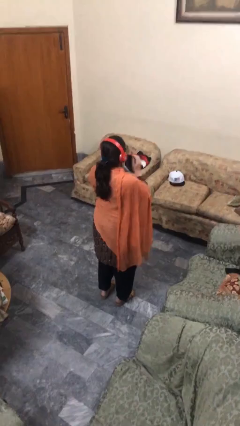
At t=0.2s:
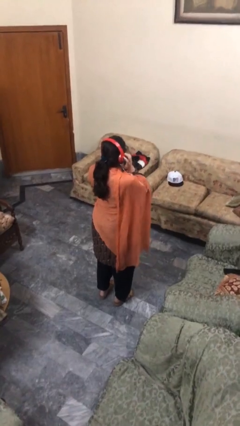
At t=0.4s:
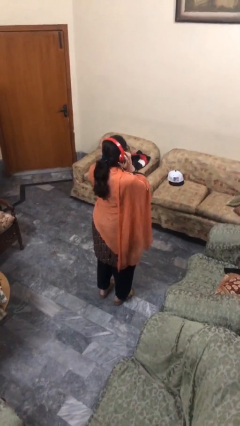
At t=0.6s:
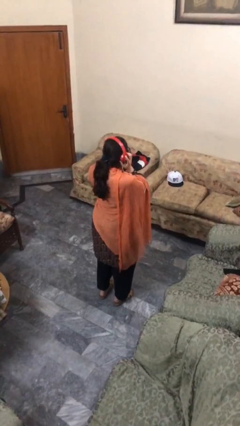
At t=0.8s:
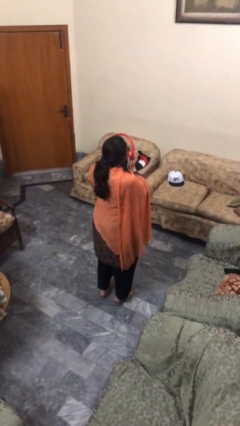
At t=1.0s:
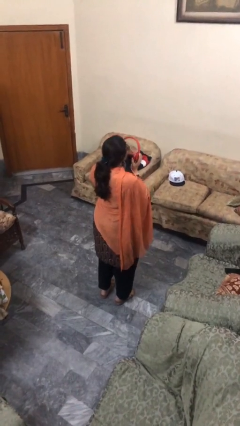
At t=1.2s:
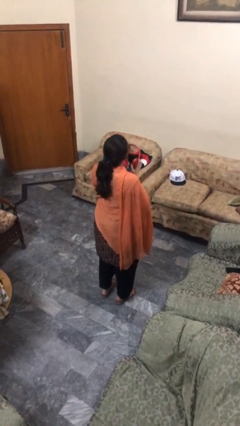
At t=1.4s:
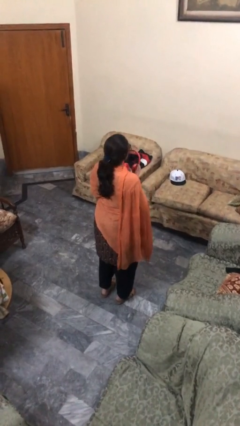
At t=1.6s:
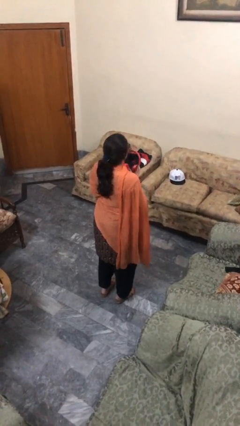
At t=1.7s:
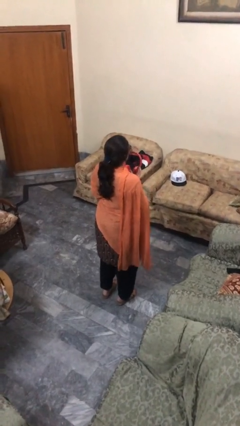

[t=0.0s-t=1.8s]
person takes off headphones

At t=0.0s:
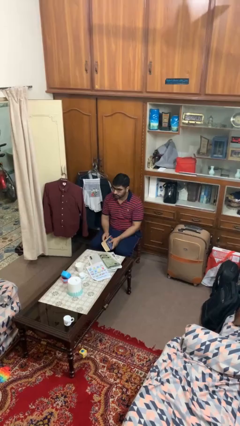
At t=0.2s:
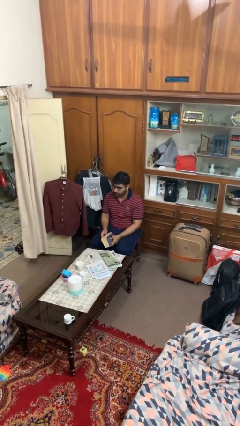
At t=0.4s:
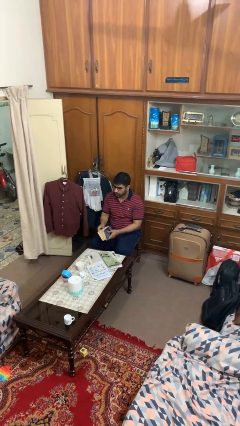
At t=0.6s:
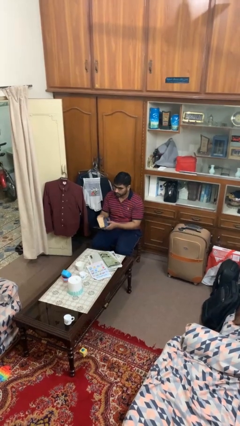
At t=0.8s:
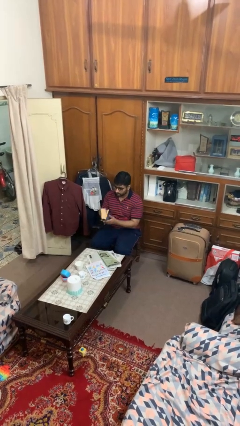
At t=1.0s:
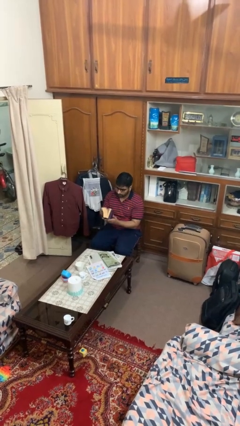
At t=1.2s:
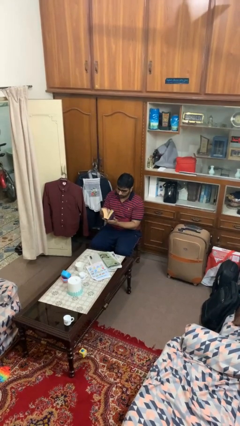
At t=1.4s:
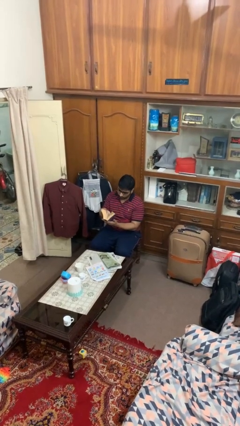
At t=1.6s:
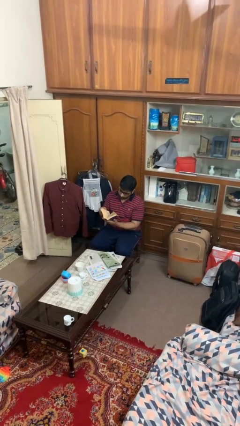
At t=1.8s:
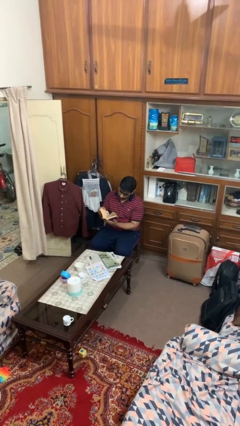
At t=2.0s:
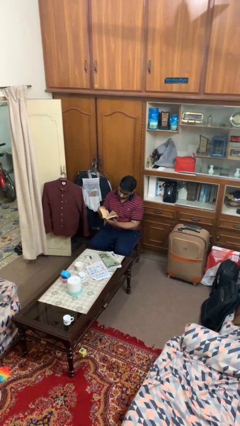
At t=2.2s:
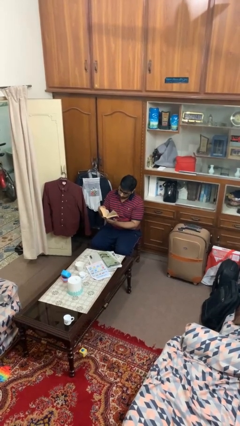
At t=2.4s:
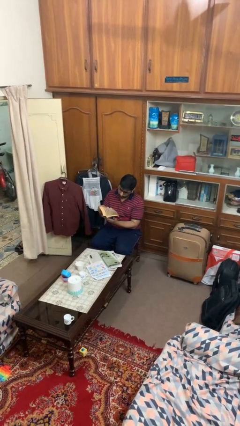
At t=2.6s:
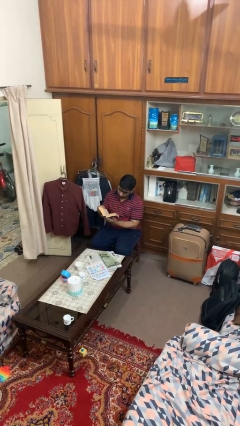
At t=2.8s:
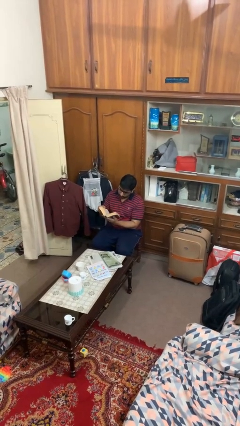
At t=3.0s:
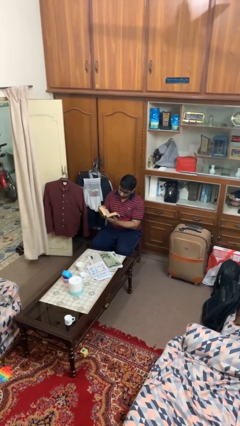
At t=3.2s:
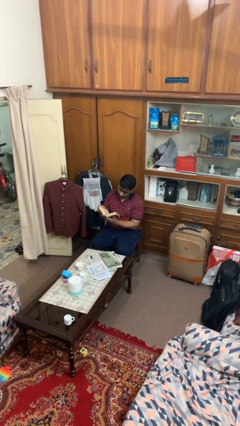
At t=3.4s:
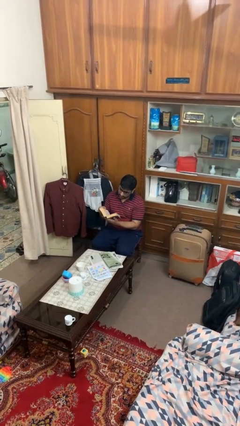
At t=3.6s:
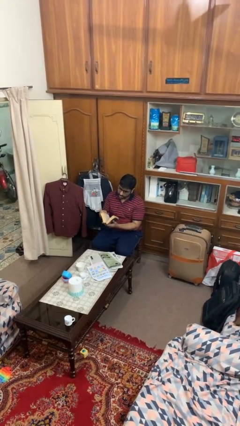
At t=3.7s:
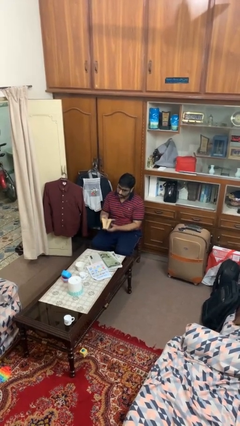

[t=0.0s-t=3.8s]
person reads book

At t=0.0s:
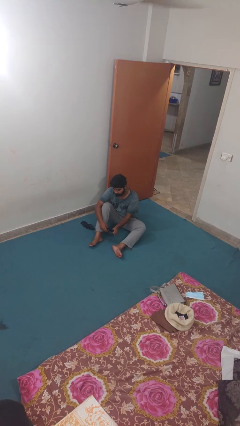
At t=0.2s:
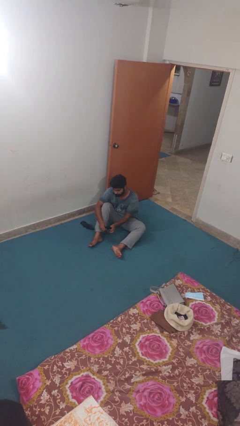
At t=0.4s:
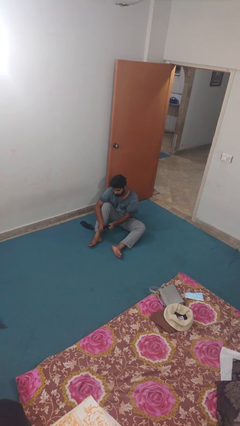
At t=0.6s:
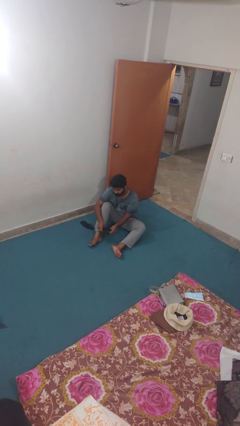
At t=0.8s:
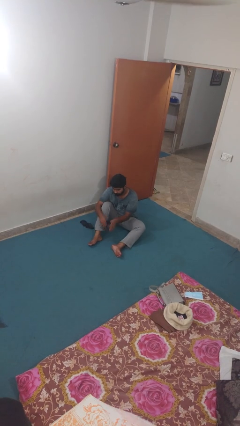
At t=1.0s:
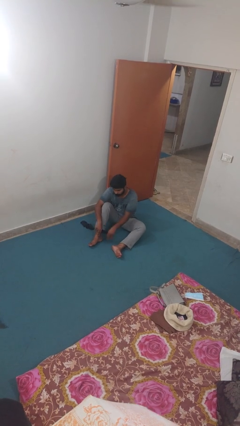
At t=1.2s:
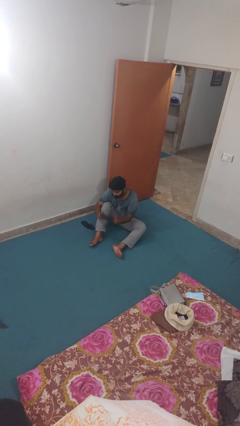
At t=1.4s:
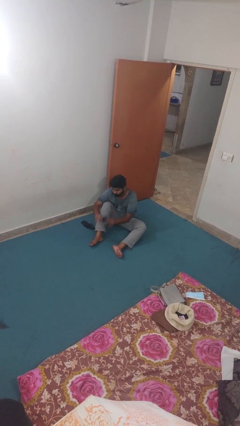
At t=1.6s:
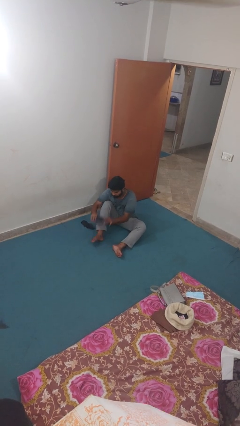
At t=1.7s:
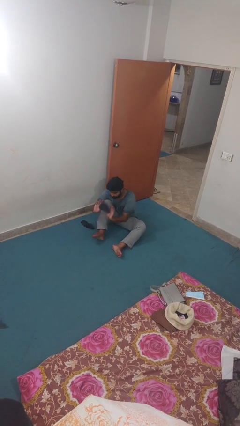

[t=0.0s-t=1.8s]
person puts on socks

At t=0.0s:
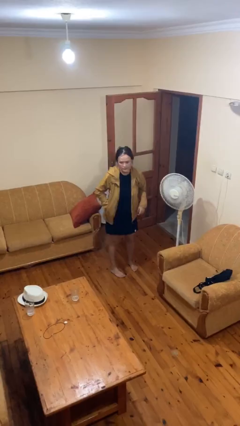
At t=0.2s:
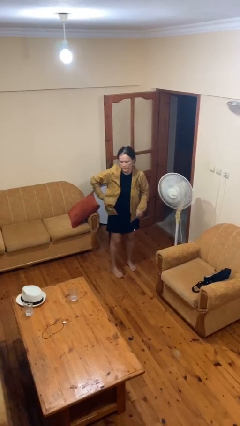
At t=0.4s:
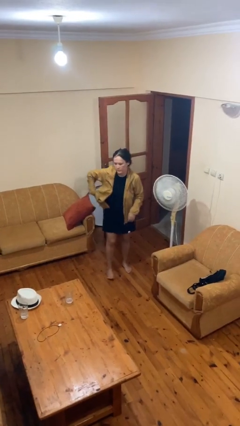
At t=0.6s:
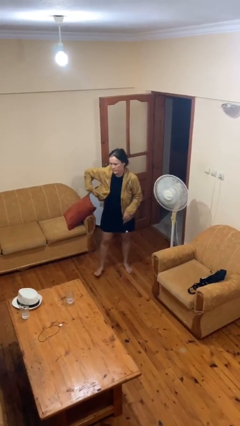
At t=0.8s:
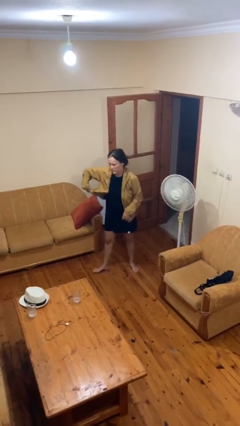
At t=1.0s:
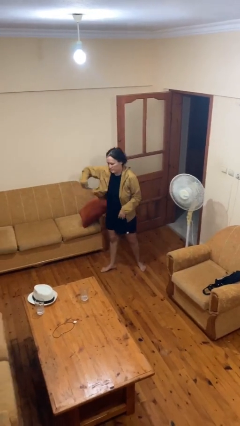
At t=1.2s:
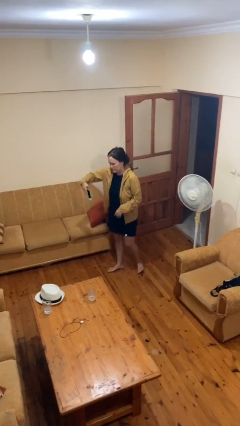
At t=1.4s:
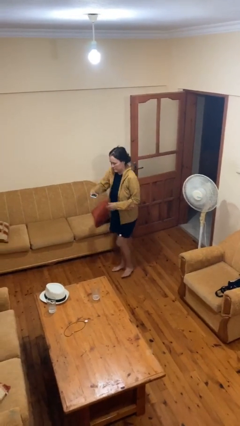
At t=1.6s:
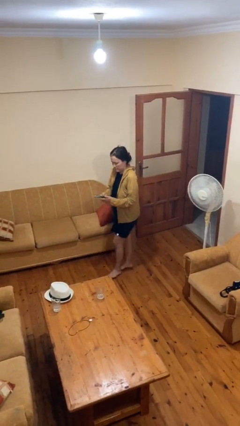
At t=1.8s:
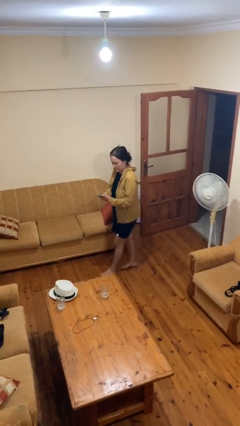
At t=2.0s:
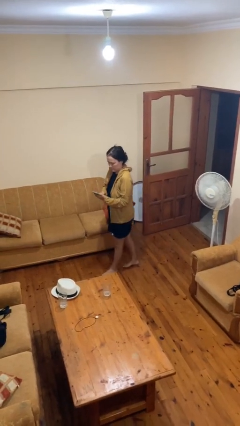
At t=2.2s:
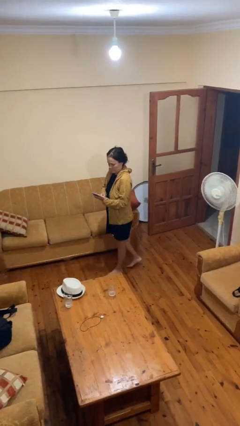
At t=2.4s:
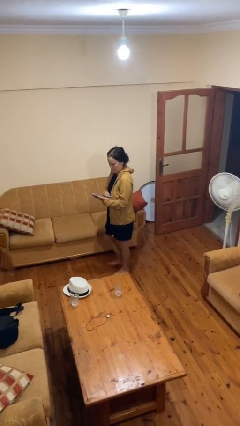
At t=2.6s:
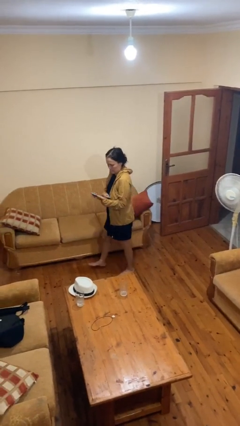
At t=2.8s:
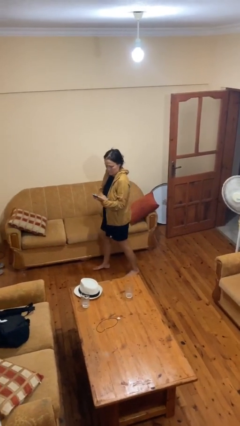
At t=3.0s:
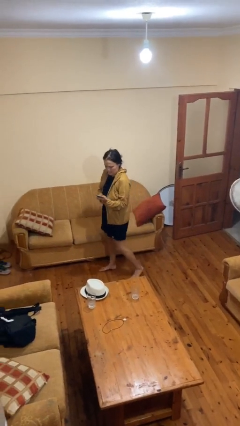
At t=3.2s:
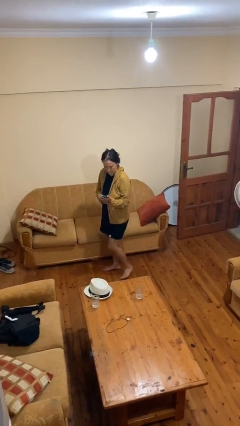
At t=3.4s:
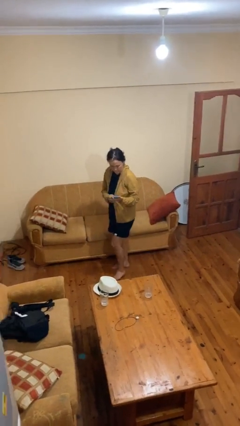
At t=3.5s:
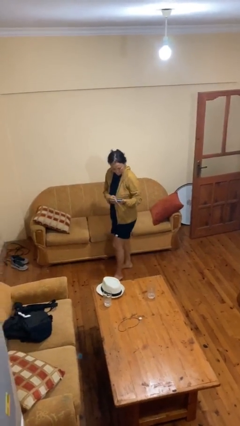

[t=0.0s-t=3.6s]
person takes phone from pocket

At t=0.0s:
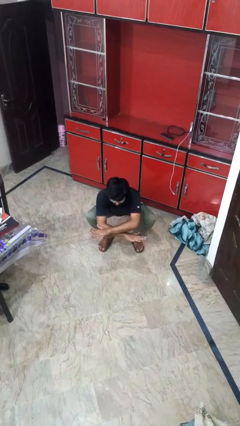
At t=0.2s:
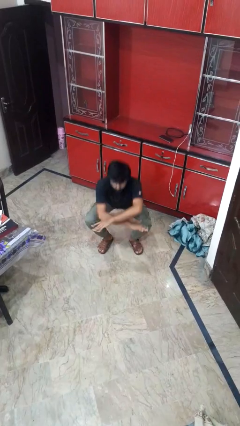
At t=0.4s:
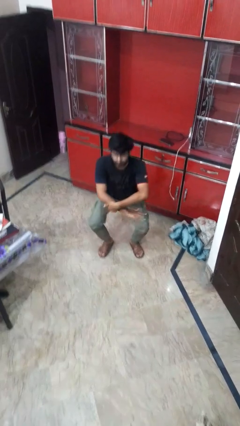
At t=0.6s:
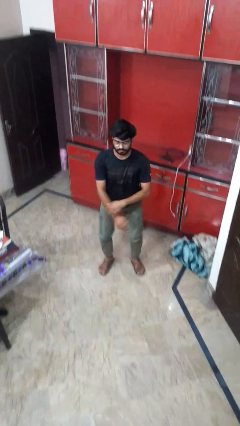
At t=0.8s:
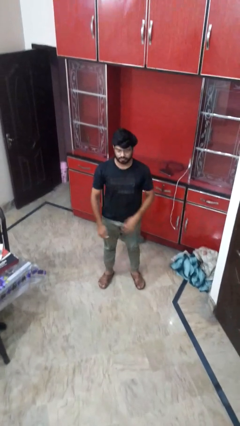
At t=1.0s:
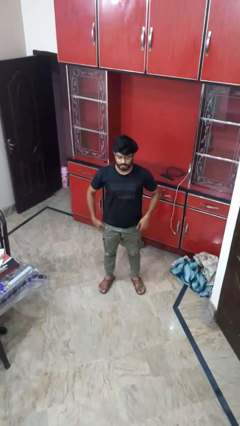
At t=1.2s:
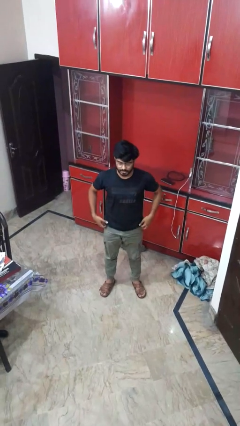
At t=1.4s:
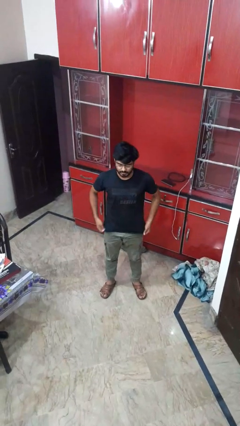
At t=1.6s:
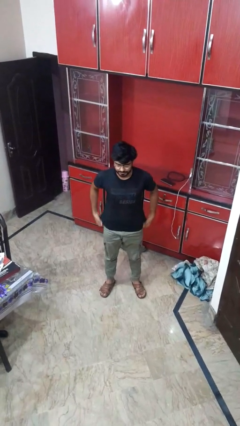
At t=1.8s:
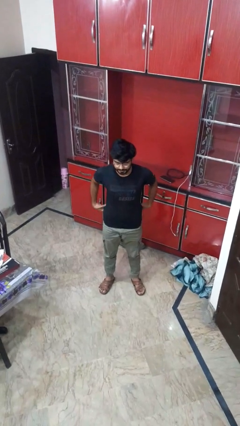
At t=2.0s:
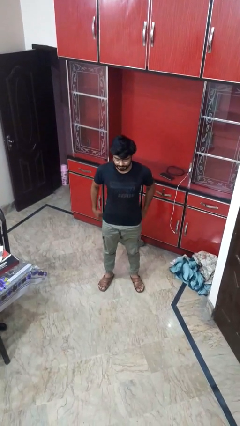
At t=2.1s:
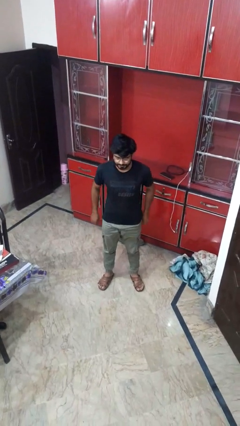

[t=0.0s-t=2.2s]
person stands up

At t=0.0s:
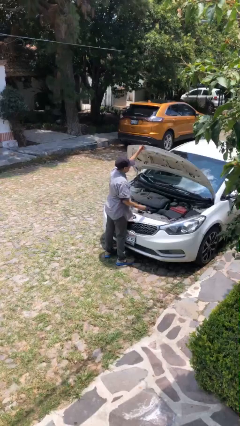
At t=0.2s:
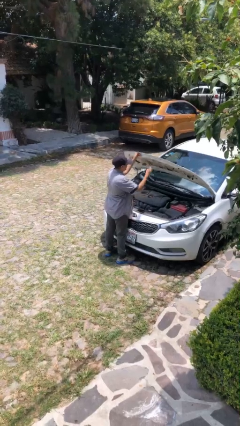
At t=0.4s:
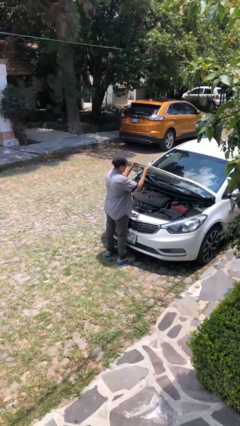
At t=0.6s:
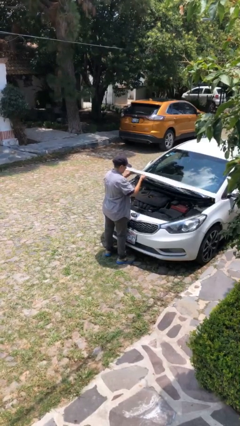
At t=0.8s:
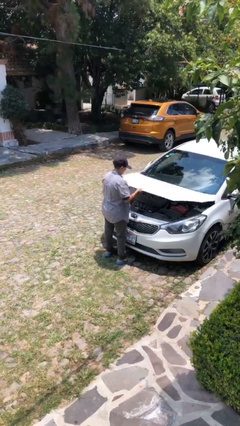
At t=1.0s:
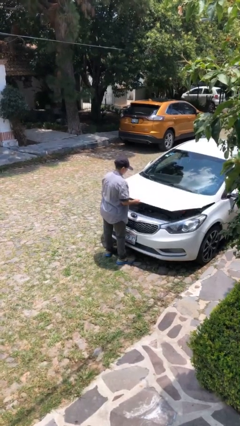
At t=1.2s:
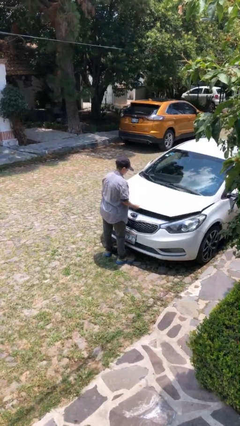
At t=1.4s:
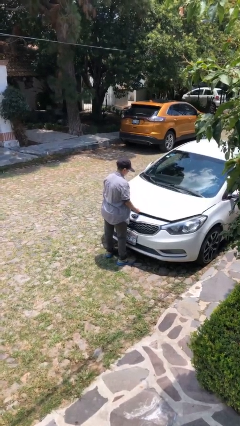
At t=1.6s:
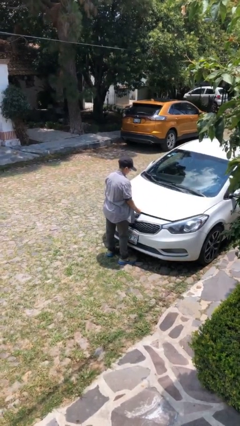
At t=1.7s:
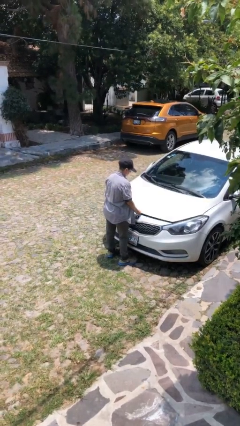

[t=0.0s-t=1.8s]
person closes car hood

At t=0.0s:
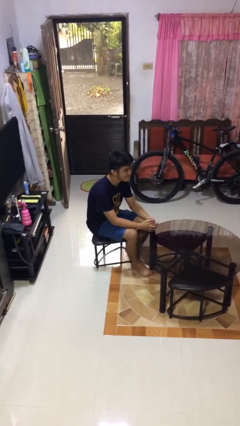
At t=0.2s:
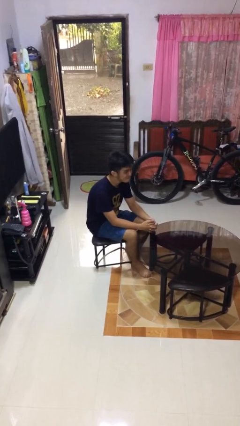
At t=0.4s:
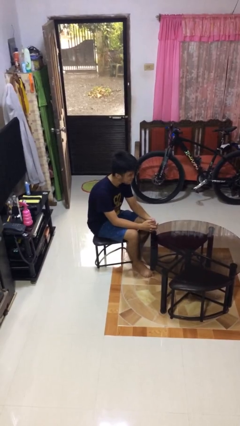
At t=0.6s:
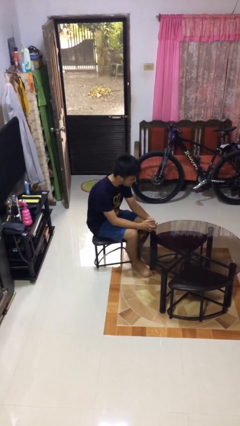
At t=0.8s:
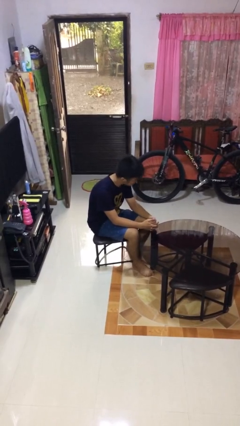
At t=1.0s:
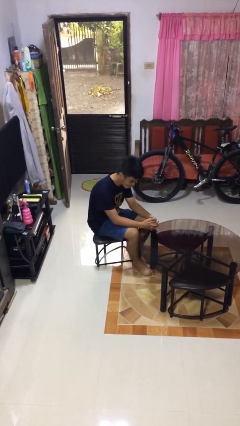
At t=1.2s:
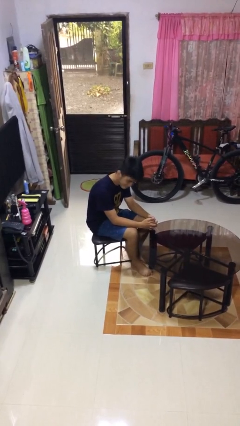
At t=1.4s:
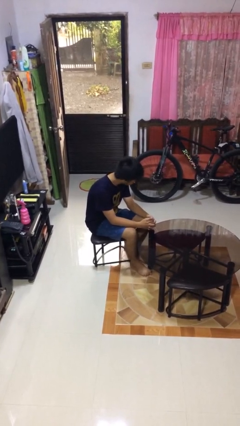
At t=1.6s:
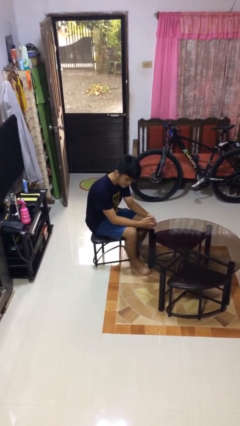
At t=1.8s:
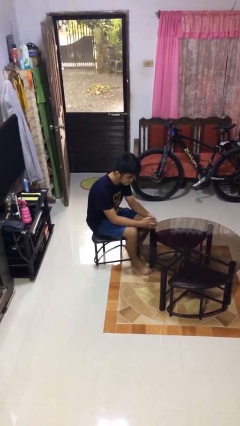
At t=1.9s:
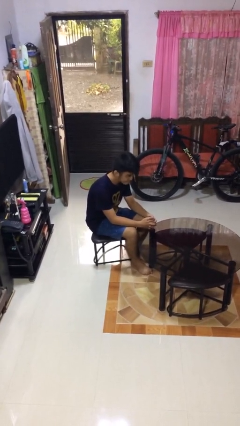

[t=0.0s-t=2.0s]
person shakes head
